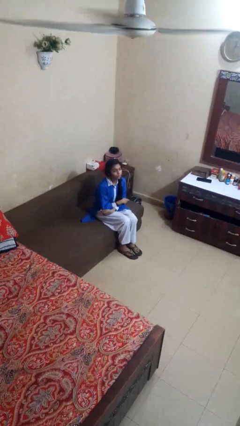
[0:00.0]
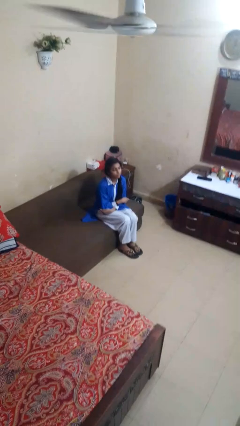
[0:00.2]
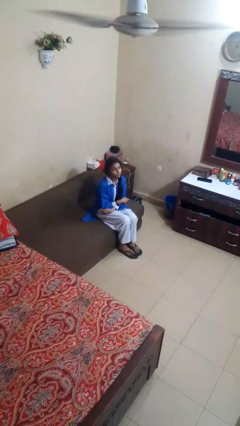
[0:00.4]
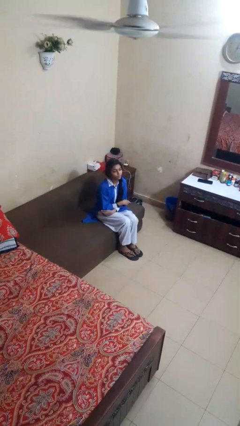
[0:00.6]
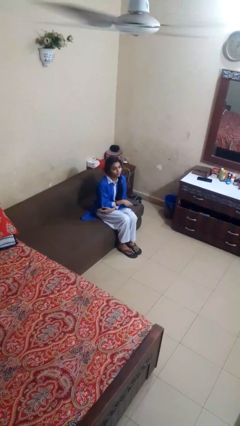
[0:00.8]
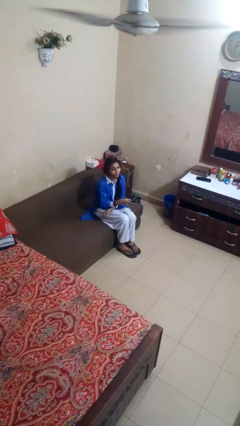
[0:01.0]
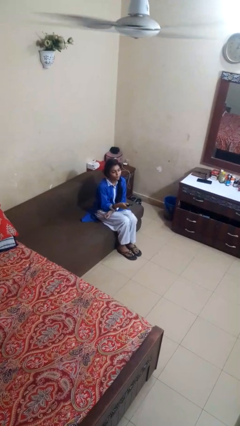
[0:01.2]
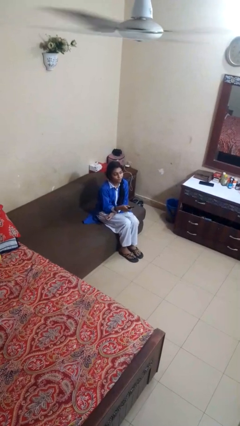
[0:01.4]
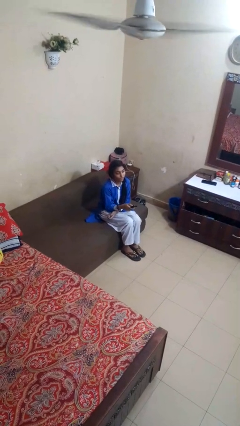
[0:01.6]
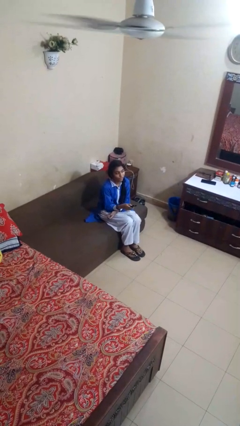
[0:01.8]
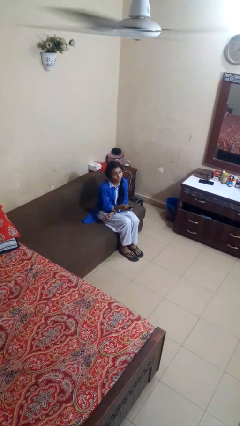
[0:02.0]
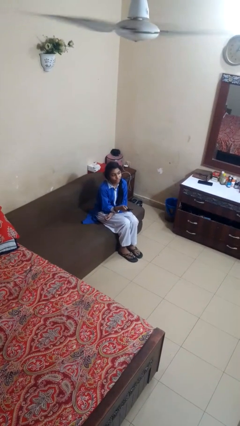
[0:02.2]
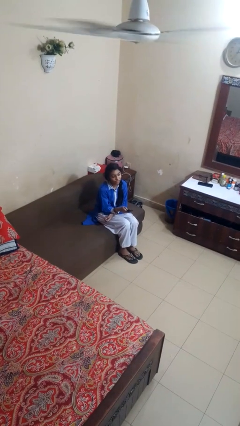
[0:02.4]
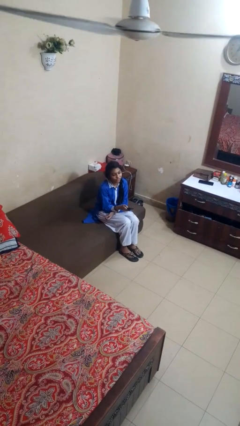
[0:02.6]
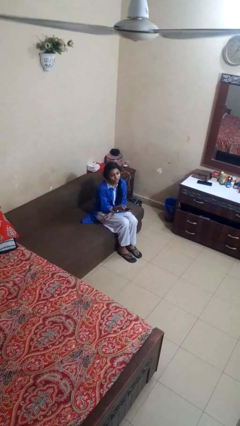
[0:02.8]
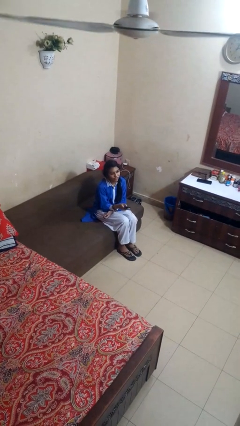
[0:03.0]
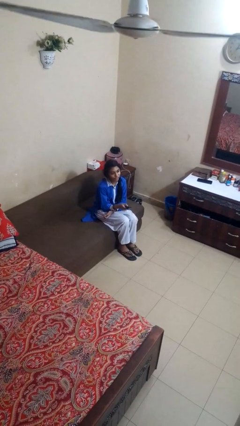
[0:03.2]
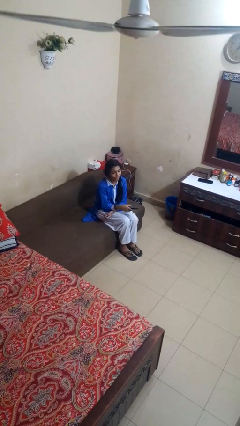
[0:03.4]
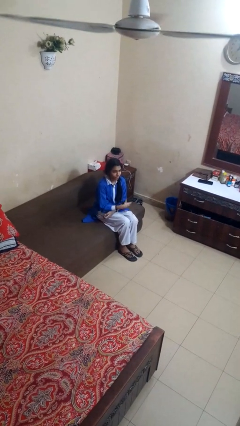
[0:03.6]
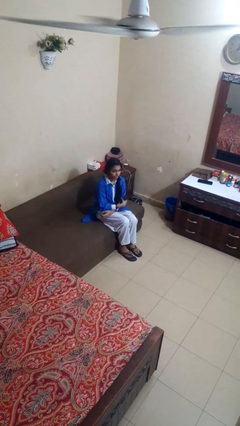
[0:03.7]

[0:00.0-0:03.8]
person uses television remote

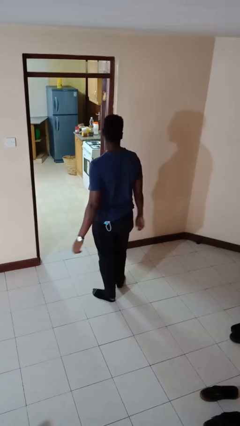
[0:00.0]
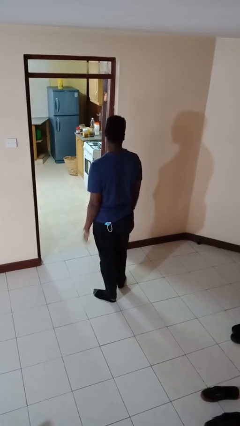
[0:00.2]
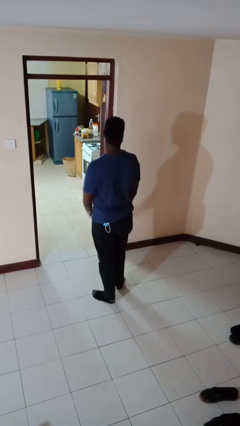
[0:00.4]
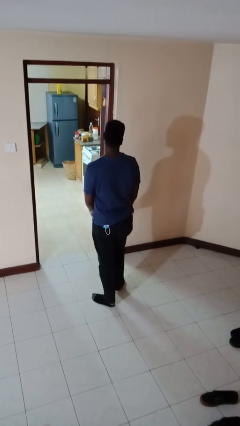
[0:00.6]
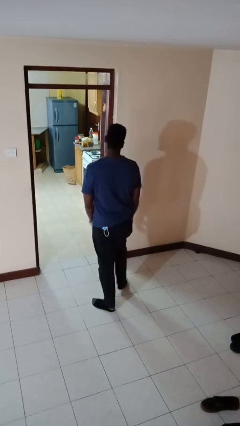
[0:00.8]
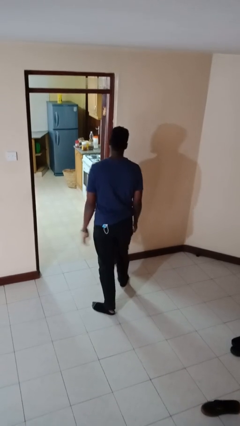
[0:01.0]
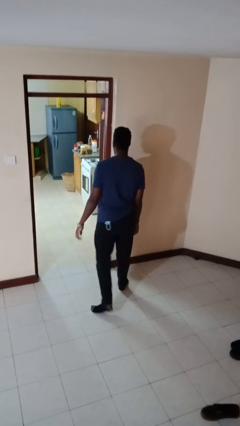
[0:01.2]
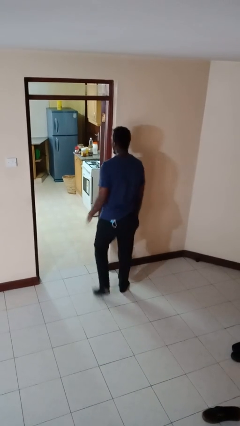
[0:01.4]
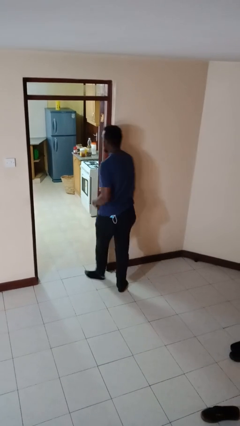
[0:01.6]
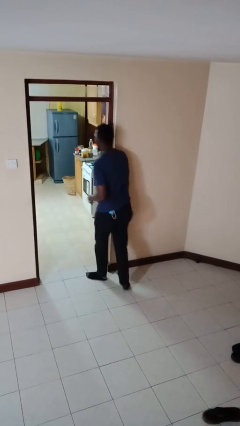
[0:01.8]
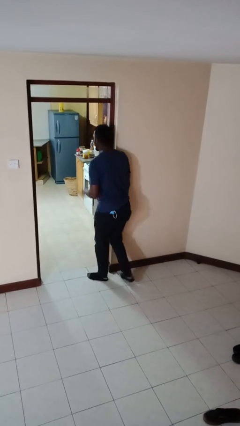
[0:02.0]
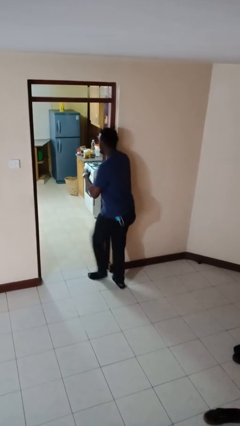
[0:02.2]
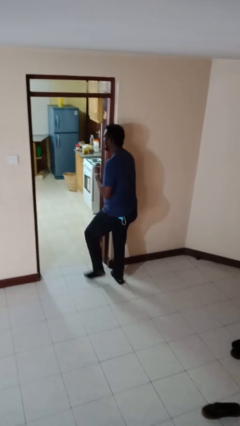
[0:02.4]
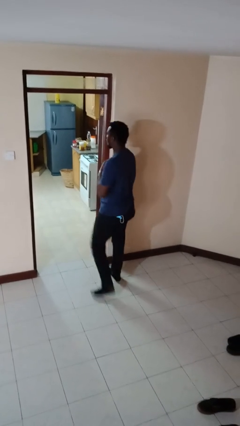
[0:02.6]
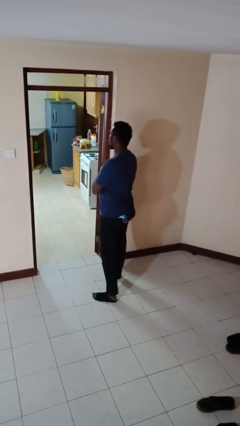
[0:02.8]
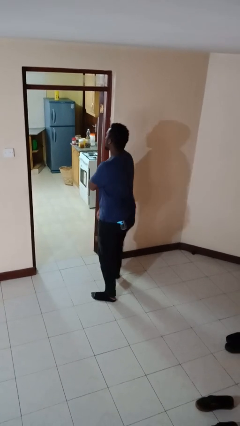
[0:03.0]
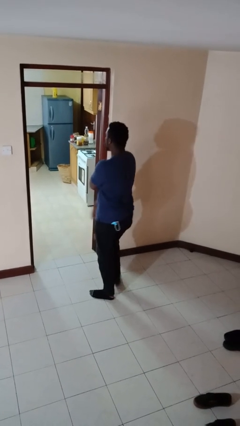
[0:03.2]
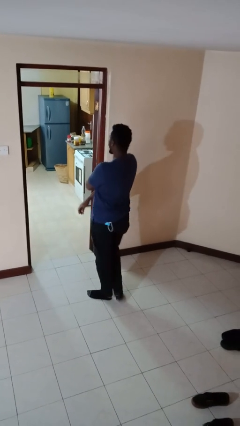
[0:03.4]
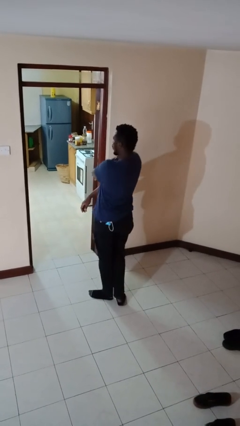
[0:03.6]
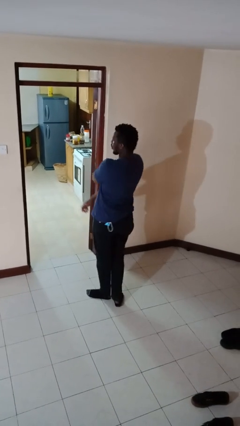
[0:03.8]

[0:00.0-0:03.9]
person bumps into wall

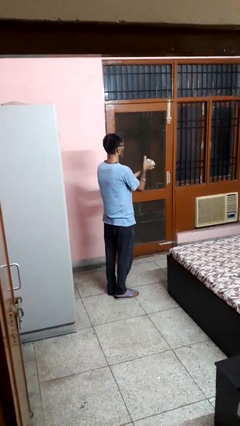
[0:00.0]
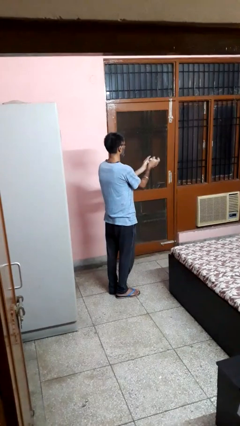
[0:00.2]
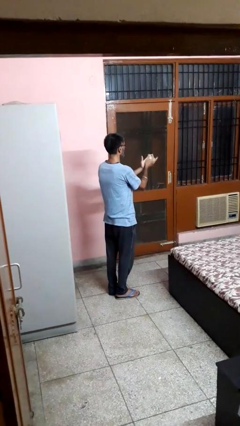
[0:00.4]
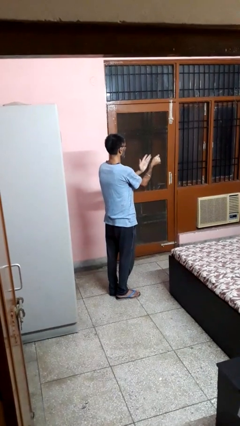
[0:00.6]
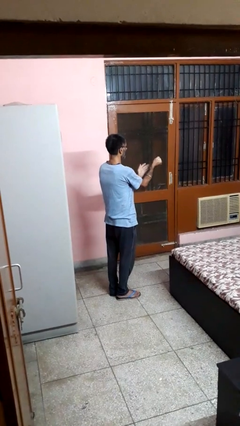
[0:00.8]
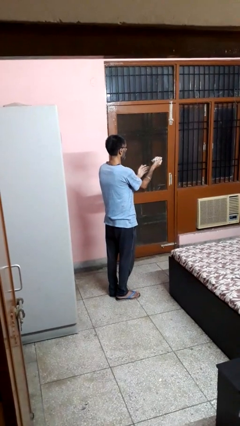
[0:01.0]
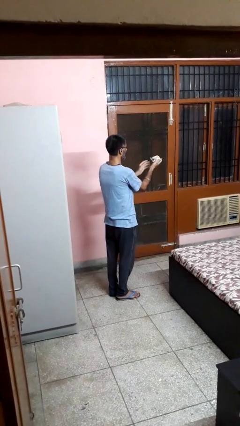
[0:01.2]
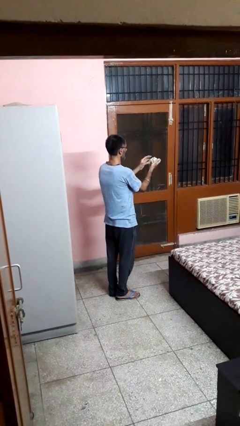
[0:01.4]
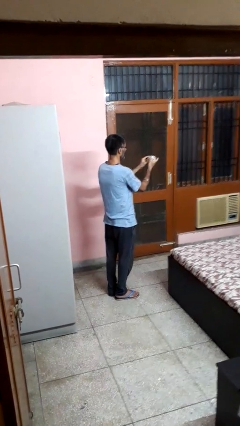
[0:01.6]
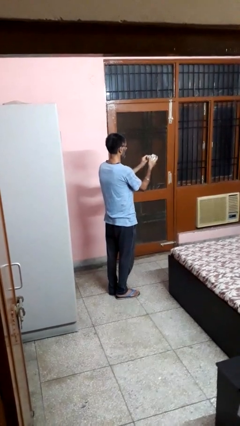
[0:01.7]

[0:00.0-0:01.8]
person crumples paper

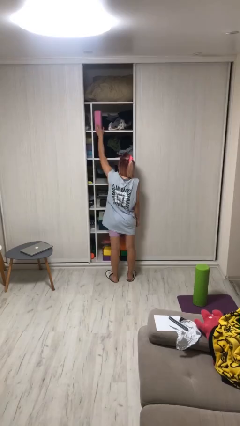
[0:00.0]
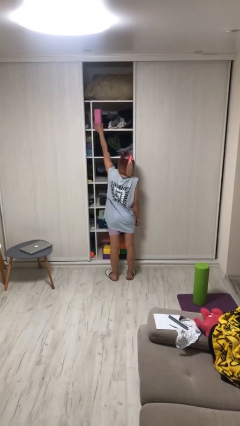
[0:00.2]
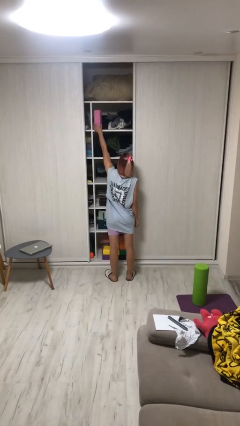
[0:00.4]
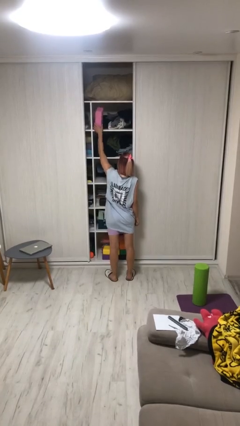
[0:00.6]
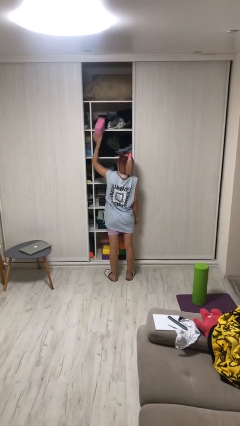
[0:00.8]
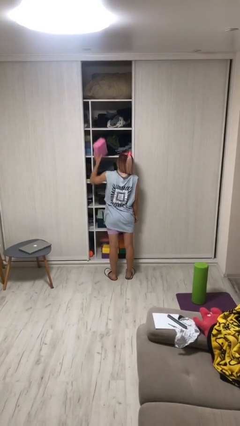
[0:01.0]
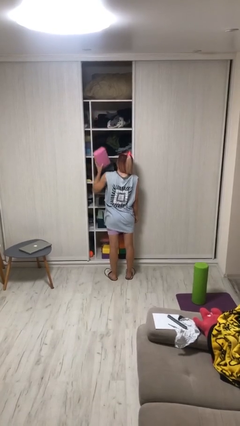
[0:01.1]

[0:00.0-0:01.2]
person picks up object from shelf

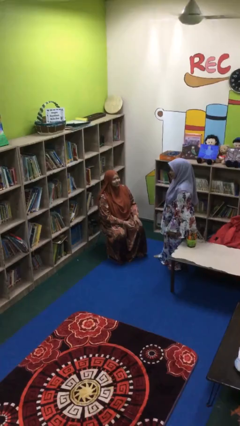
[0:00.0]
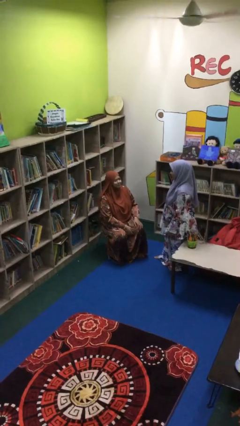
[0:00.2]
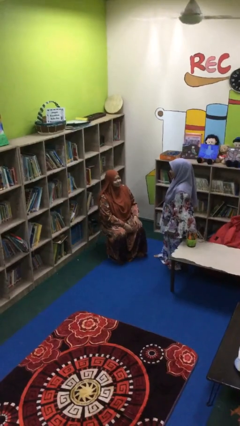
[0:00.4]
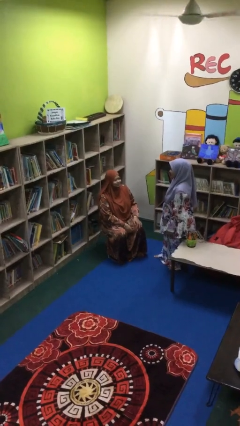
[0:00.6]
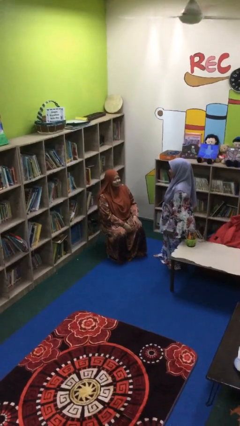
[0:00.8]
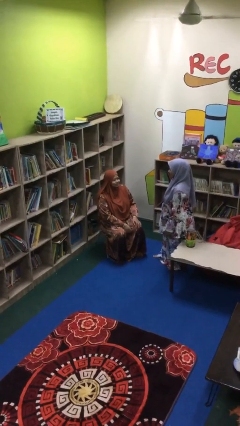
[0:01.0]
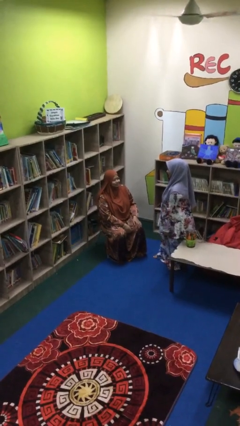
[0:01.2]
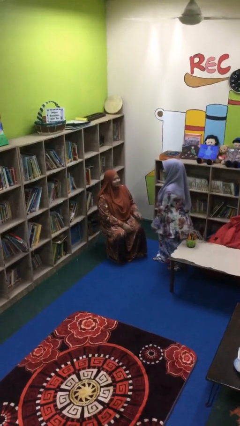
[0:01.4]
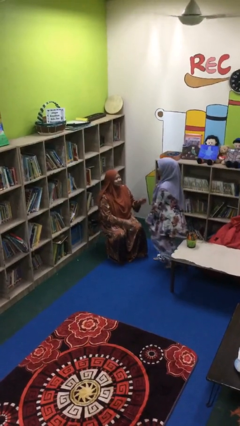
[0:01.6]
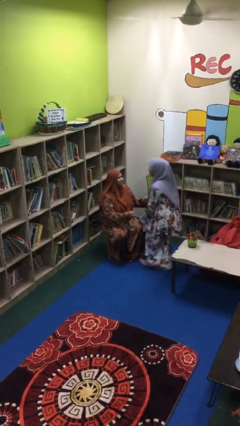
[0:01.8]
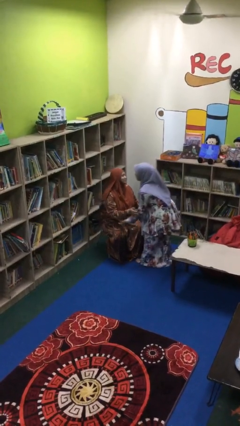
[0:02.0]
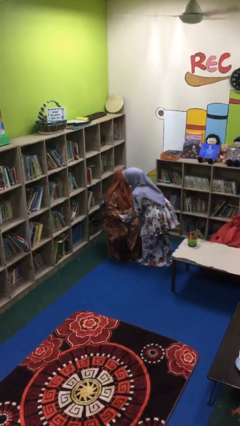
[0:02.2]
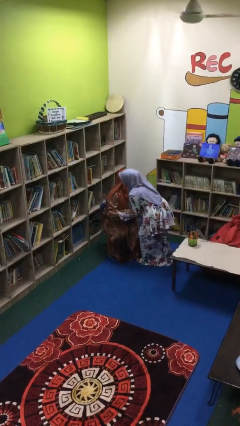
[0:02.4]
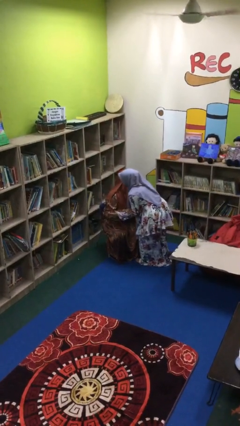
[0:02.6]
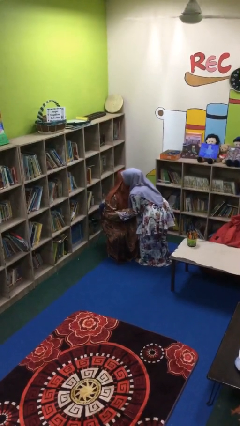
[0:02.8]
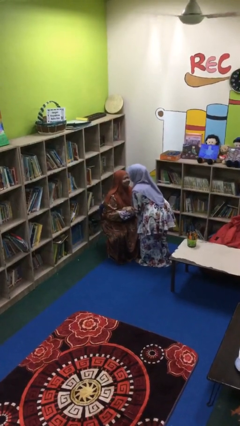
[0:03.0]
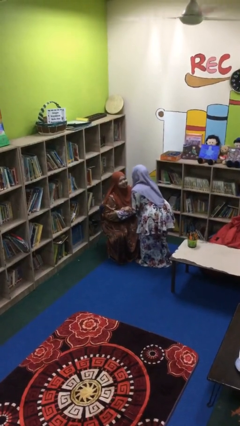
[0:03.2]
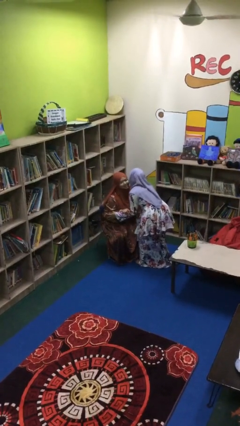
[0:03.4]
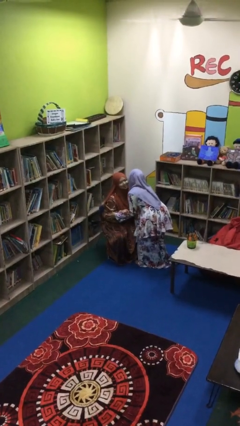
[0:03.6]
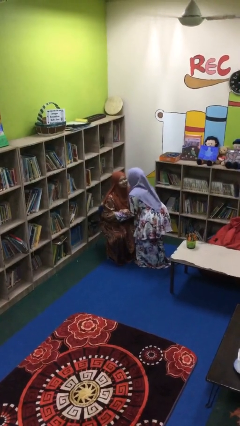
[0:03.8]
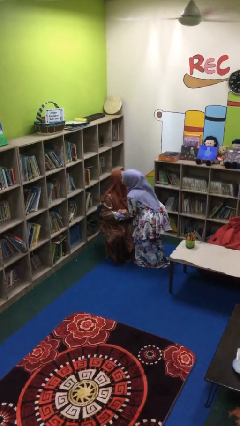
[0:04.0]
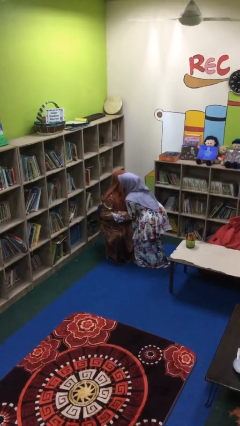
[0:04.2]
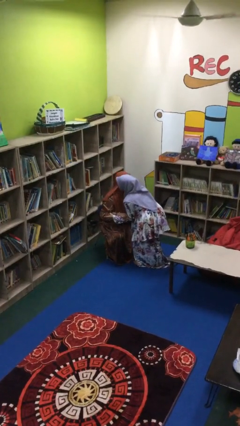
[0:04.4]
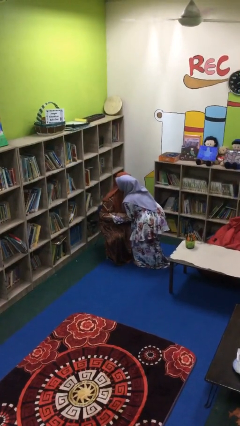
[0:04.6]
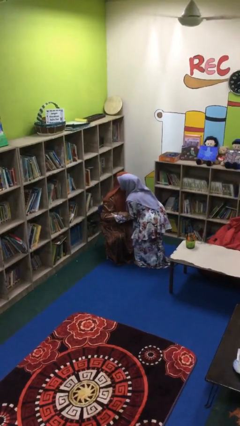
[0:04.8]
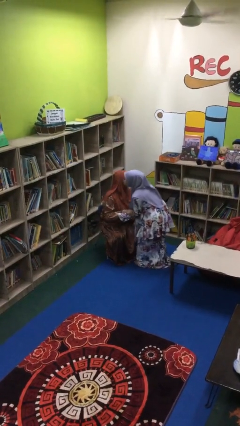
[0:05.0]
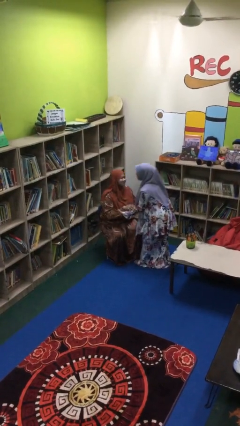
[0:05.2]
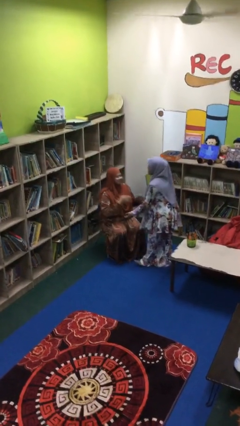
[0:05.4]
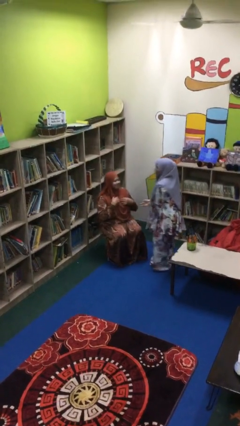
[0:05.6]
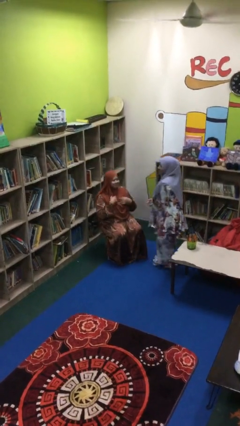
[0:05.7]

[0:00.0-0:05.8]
person embraces person

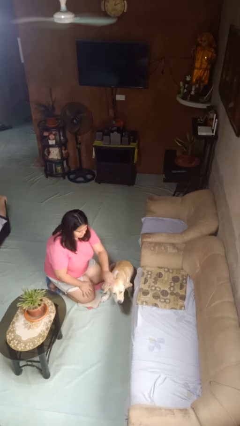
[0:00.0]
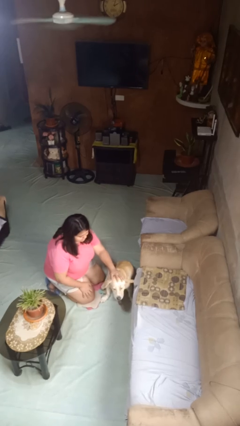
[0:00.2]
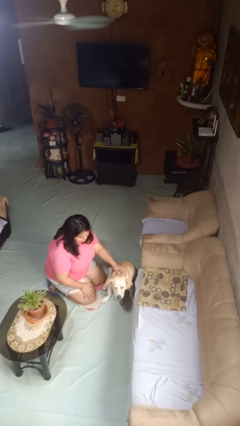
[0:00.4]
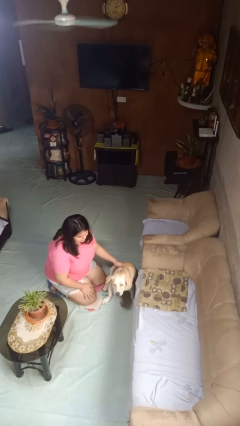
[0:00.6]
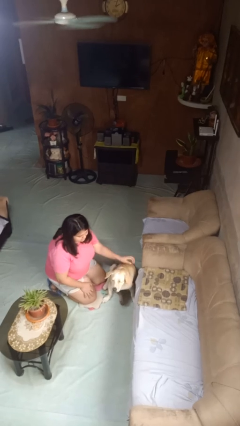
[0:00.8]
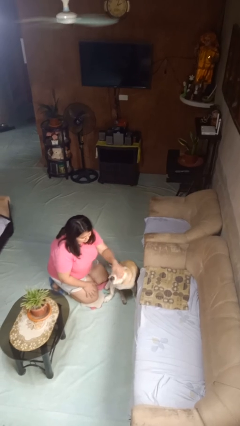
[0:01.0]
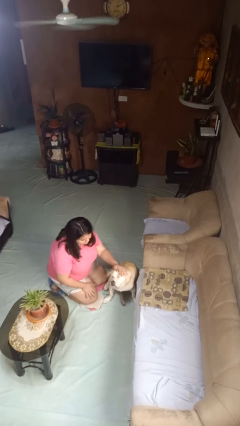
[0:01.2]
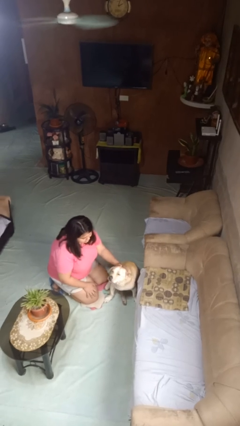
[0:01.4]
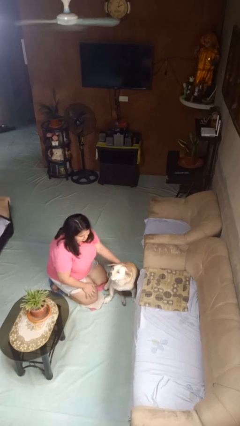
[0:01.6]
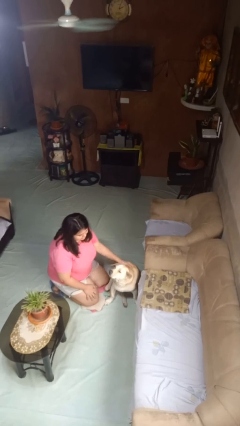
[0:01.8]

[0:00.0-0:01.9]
person pets dog
